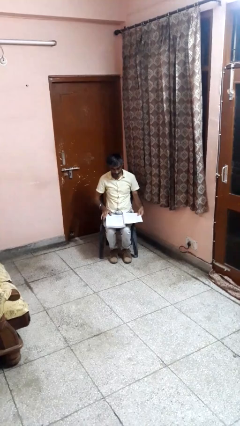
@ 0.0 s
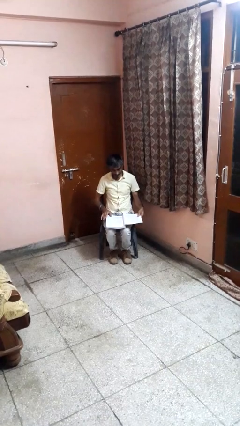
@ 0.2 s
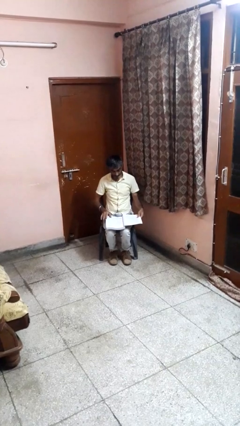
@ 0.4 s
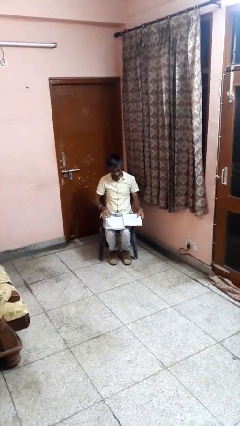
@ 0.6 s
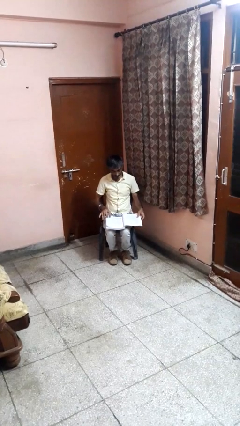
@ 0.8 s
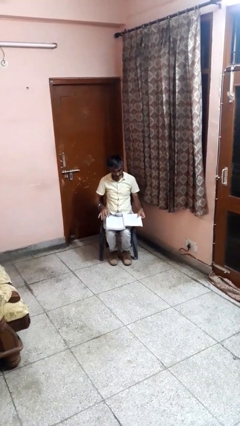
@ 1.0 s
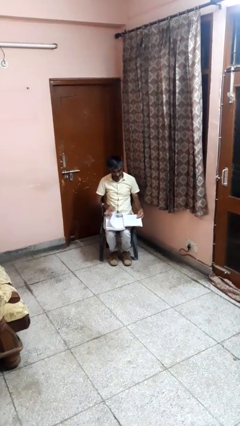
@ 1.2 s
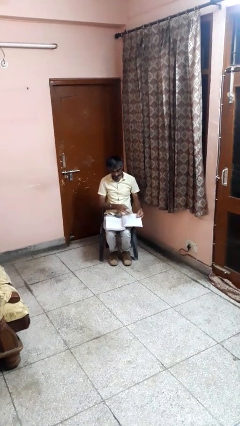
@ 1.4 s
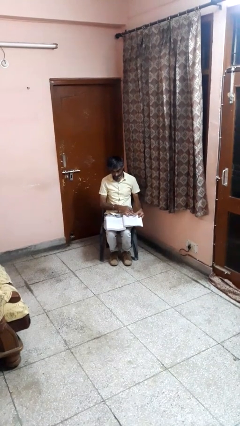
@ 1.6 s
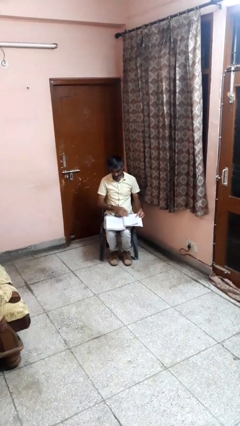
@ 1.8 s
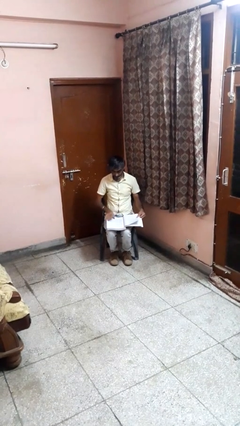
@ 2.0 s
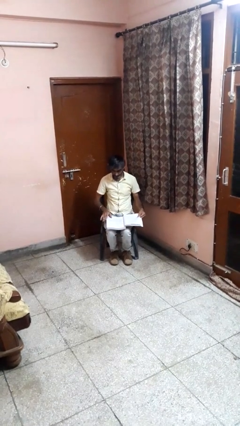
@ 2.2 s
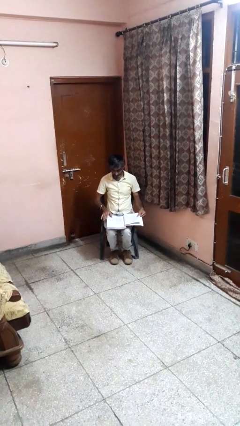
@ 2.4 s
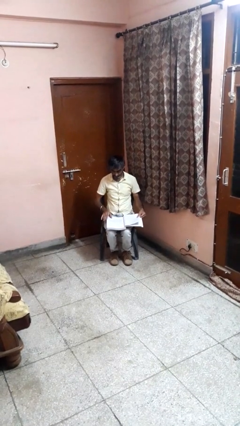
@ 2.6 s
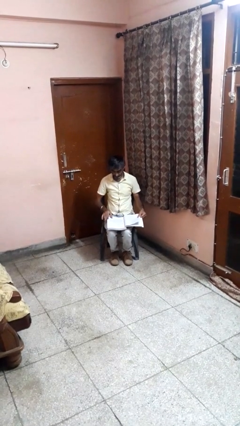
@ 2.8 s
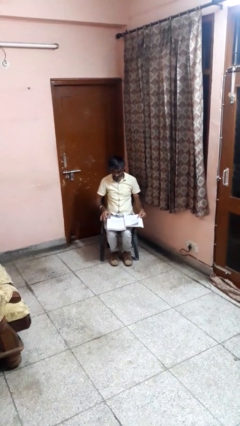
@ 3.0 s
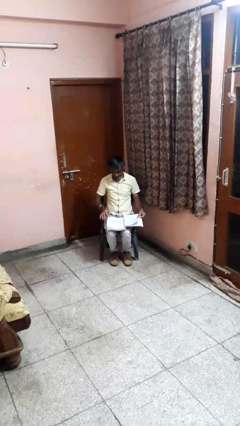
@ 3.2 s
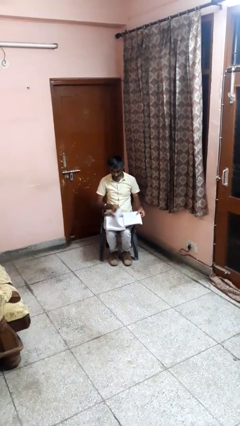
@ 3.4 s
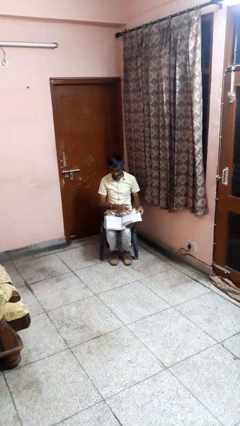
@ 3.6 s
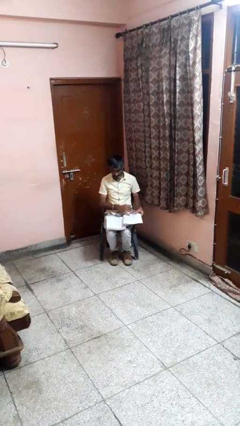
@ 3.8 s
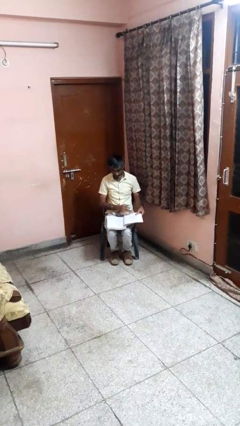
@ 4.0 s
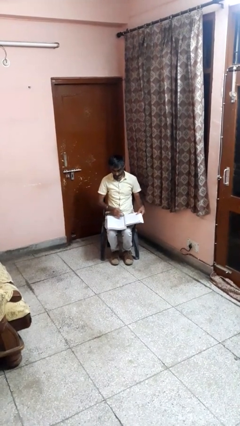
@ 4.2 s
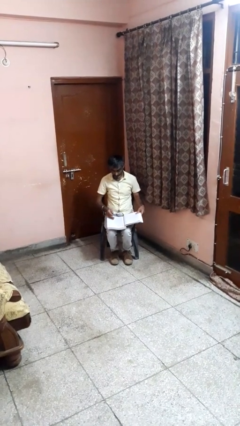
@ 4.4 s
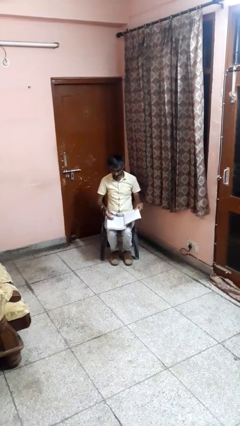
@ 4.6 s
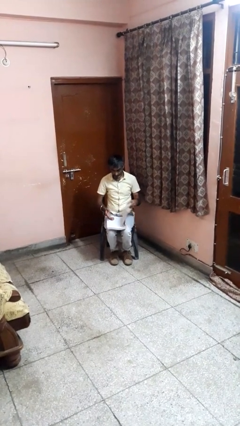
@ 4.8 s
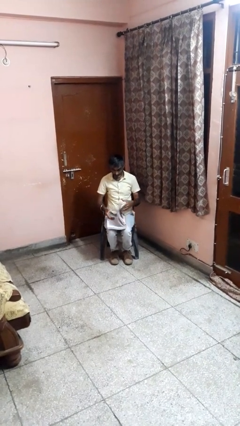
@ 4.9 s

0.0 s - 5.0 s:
person reads book

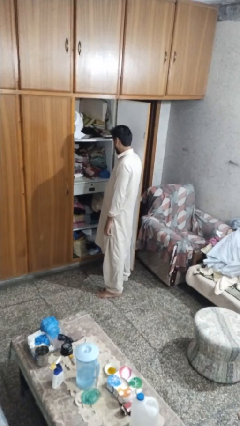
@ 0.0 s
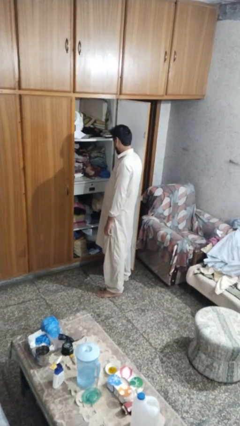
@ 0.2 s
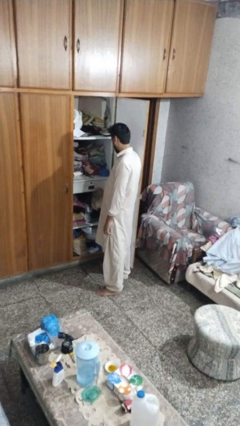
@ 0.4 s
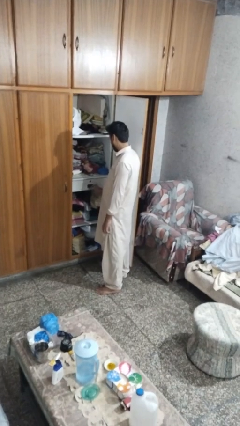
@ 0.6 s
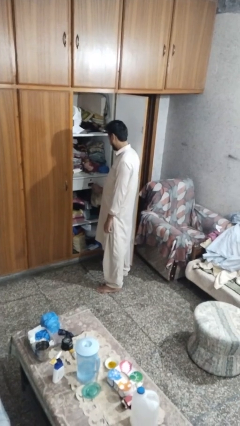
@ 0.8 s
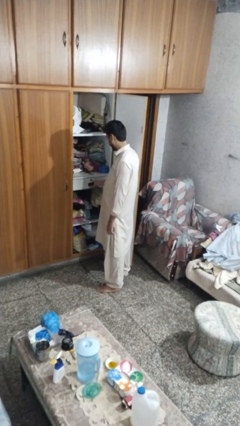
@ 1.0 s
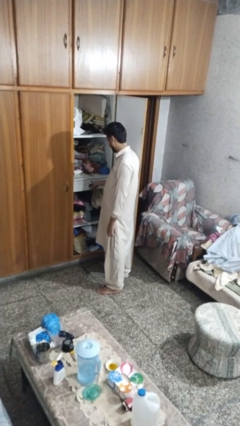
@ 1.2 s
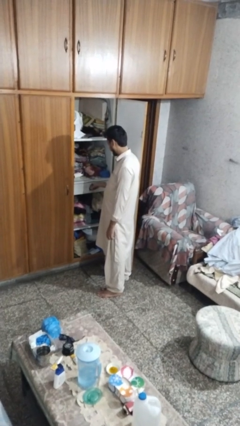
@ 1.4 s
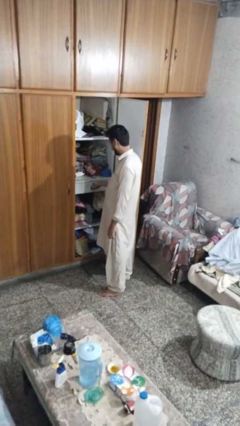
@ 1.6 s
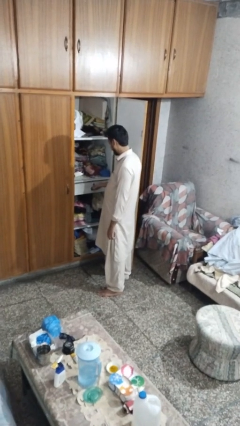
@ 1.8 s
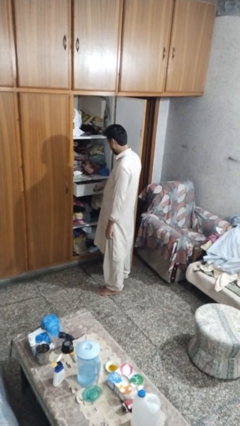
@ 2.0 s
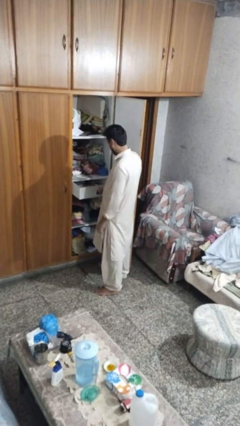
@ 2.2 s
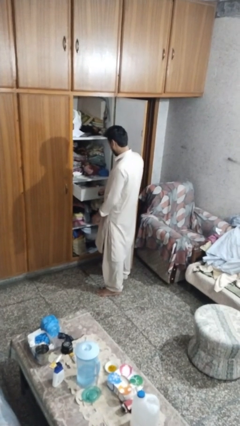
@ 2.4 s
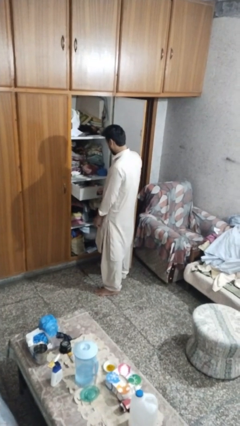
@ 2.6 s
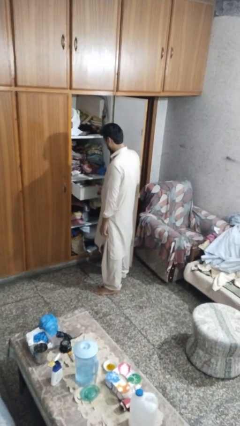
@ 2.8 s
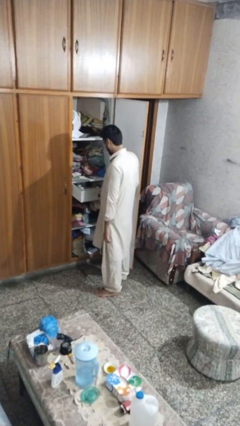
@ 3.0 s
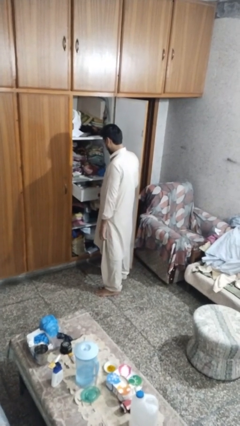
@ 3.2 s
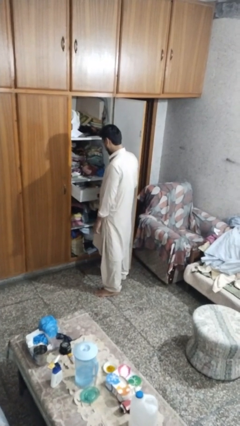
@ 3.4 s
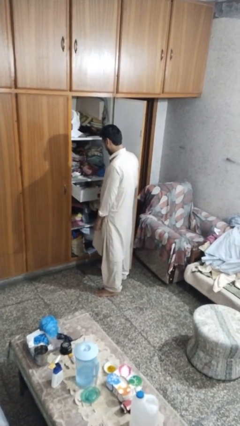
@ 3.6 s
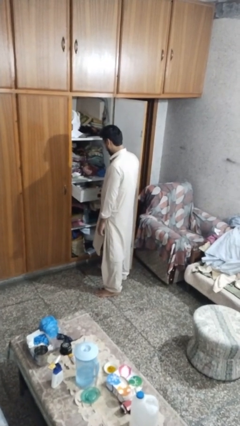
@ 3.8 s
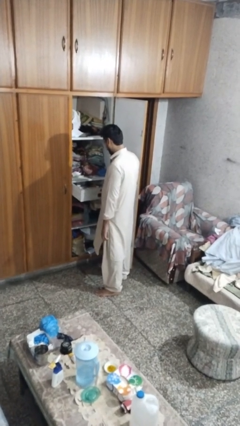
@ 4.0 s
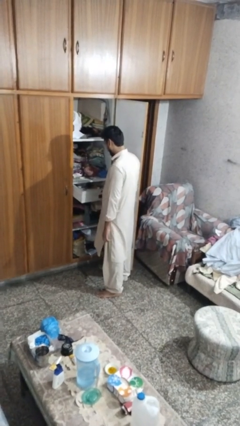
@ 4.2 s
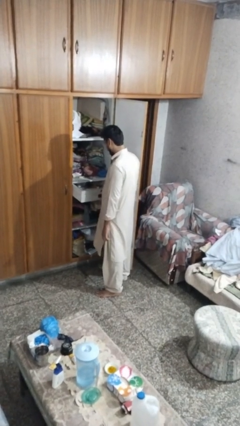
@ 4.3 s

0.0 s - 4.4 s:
person opens dresser drawer

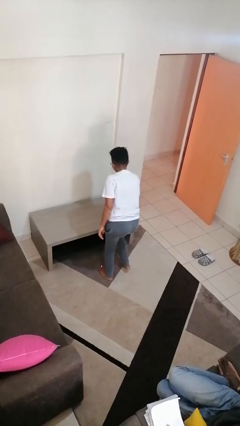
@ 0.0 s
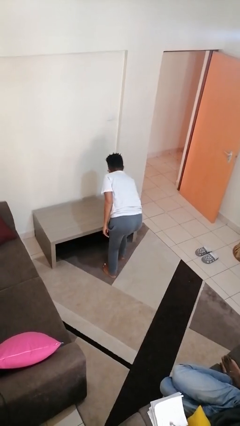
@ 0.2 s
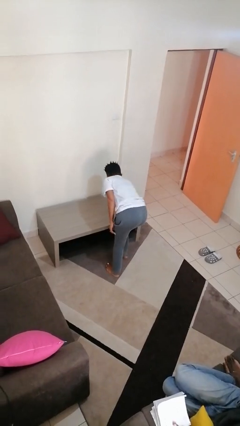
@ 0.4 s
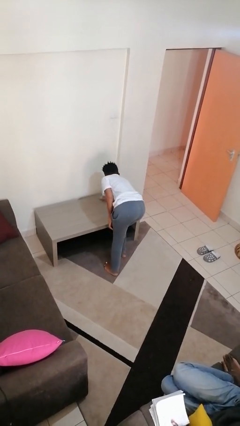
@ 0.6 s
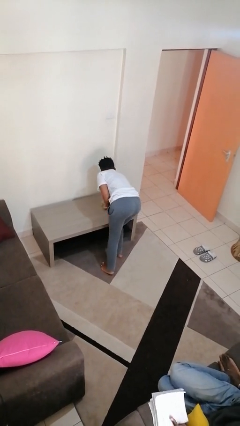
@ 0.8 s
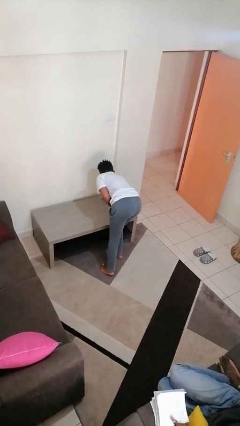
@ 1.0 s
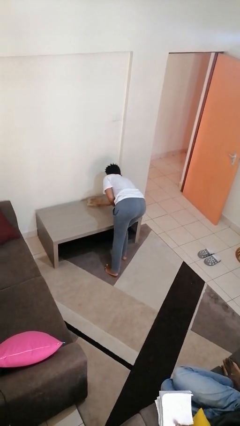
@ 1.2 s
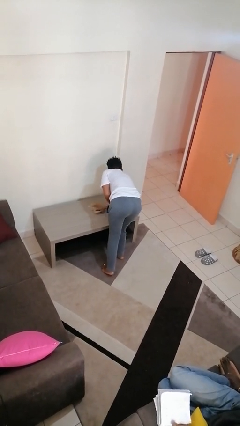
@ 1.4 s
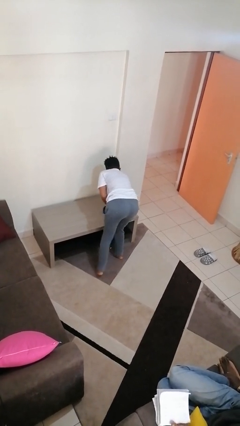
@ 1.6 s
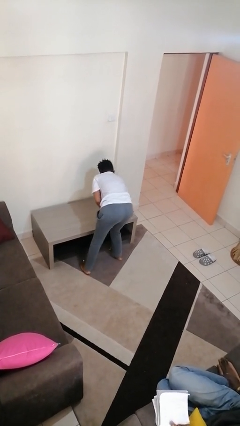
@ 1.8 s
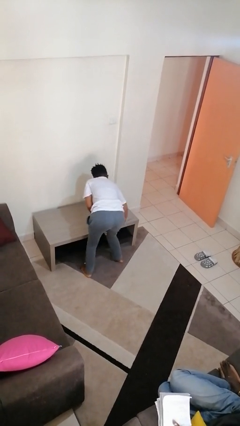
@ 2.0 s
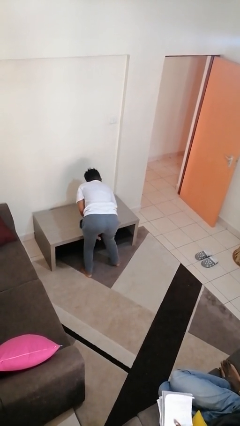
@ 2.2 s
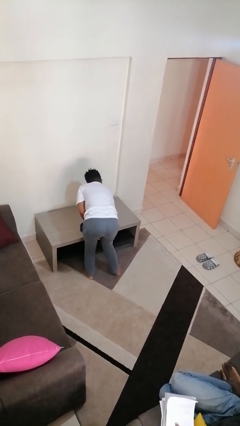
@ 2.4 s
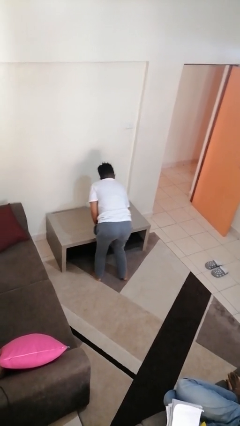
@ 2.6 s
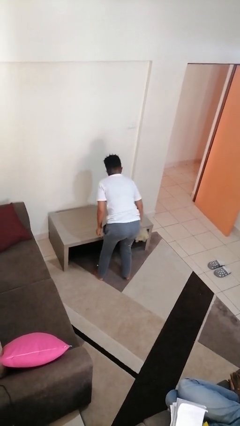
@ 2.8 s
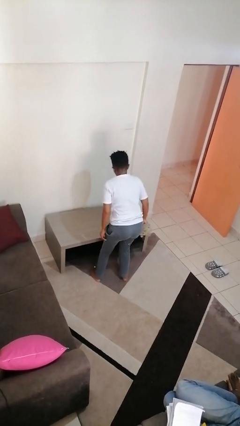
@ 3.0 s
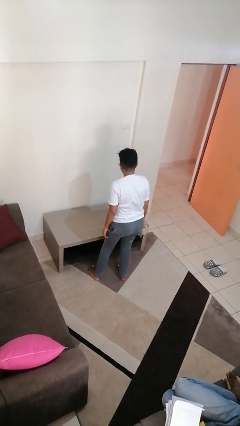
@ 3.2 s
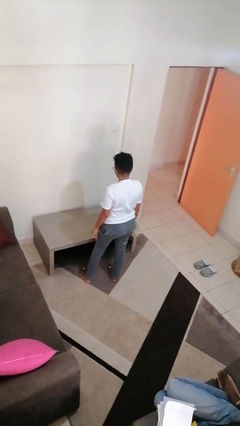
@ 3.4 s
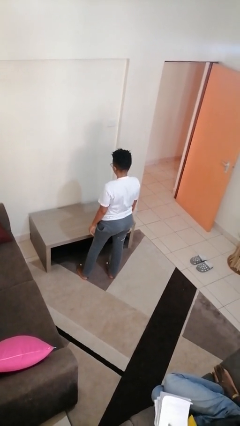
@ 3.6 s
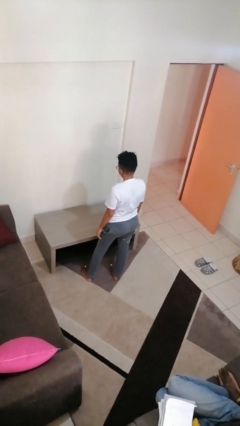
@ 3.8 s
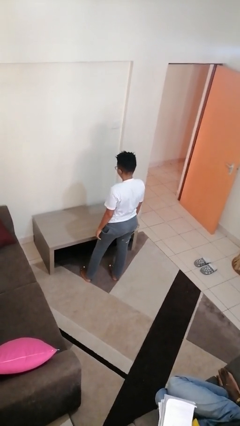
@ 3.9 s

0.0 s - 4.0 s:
person cleans table with rag

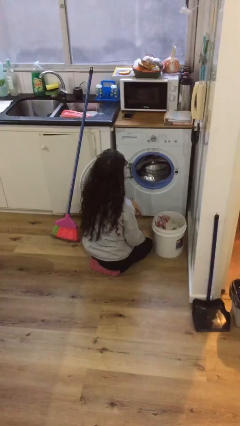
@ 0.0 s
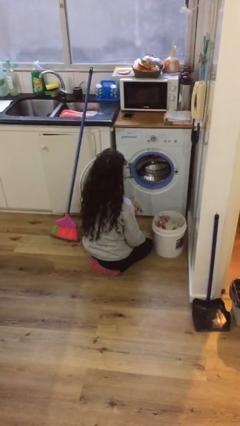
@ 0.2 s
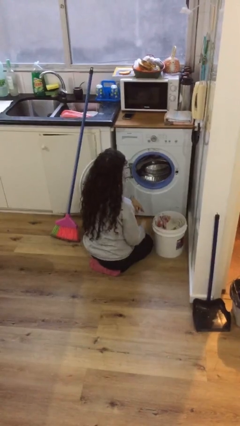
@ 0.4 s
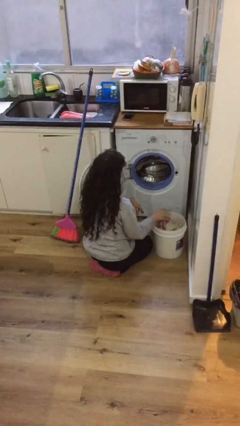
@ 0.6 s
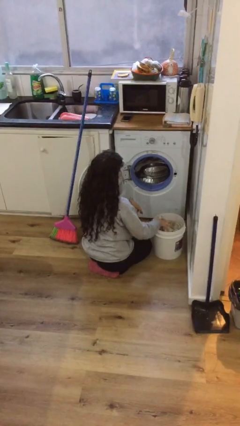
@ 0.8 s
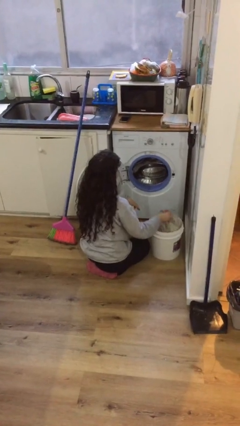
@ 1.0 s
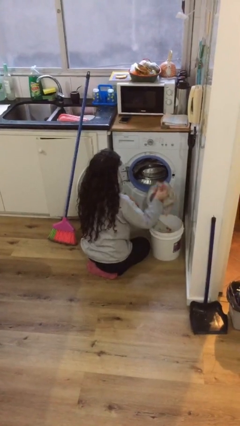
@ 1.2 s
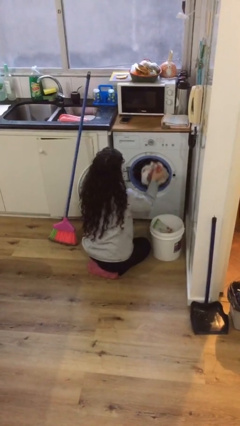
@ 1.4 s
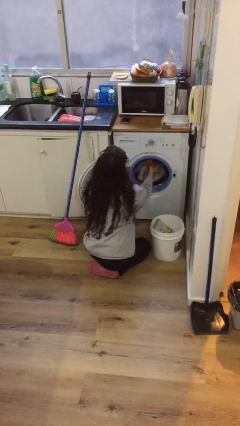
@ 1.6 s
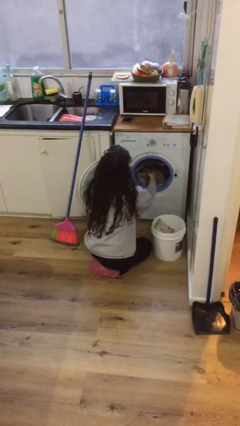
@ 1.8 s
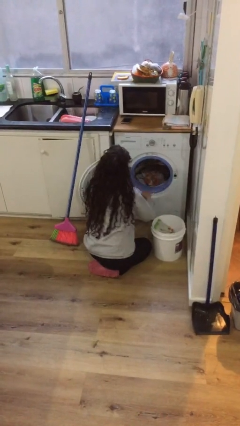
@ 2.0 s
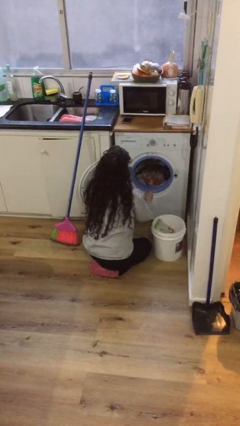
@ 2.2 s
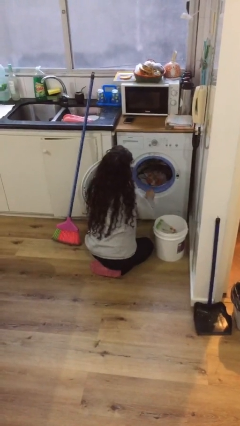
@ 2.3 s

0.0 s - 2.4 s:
person loads clotheswasher

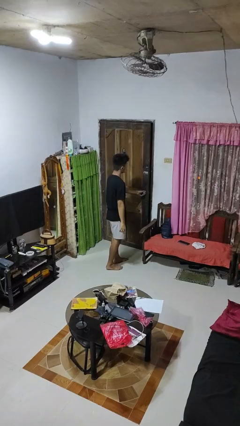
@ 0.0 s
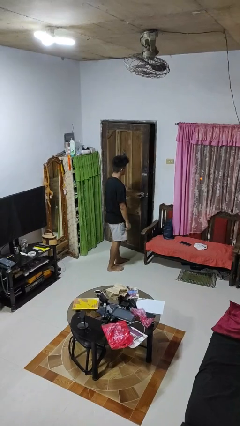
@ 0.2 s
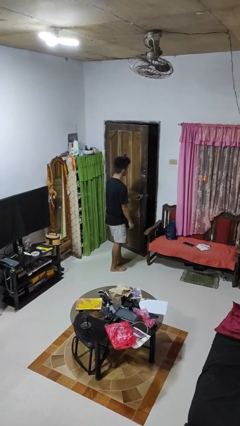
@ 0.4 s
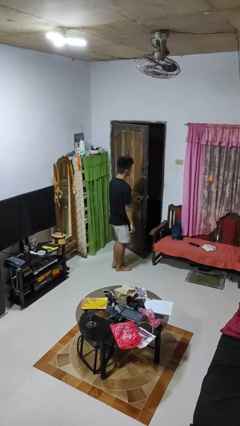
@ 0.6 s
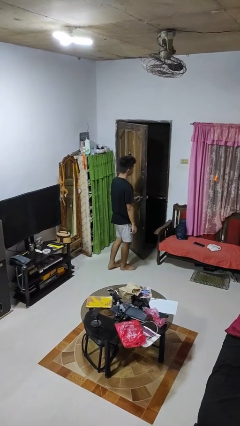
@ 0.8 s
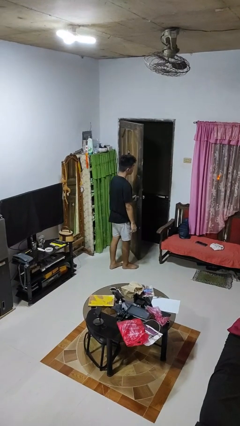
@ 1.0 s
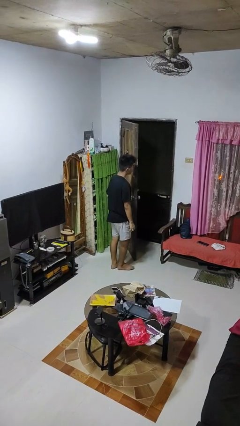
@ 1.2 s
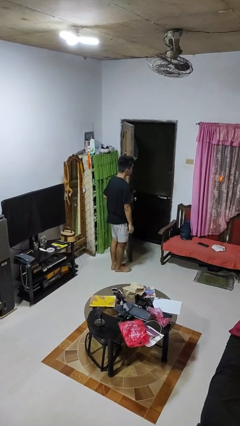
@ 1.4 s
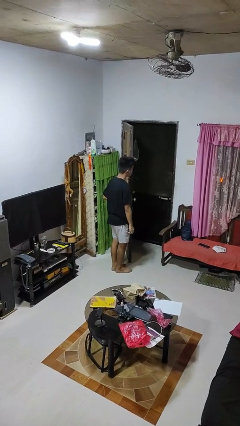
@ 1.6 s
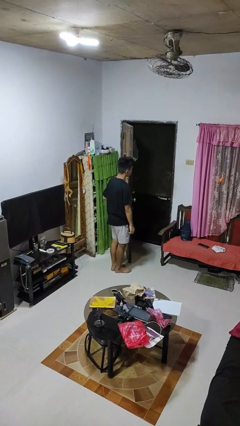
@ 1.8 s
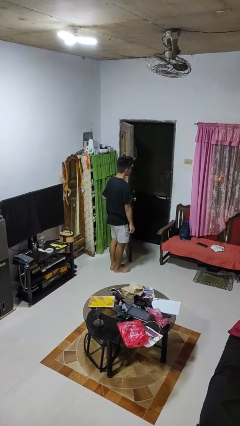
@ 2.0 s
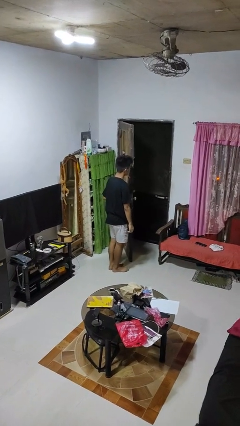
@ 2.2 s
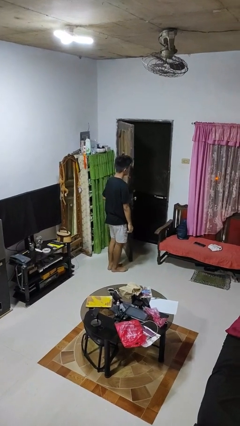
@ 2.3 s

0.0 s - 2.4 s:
person opens facility door
